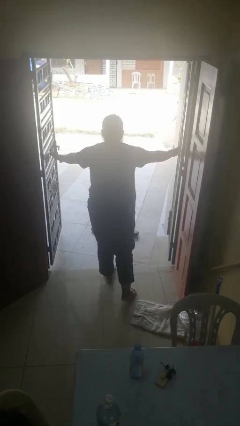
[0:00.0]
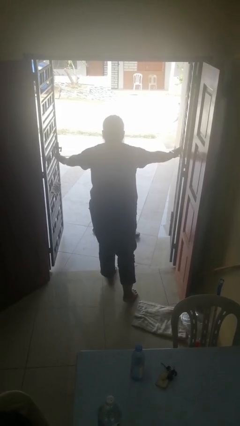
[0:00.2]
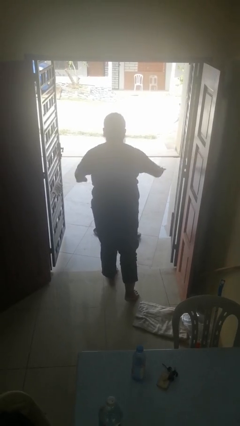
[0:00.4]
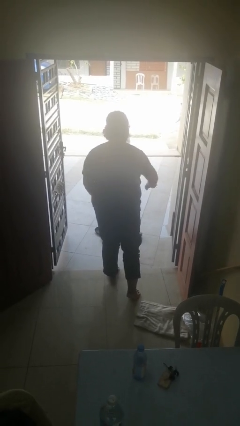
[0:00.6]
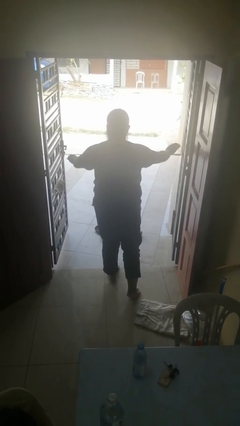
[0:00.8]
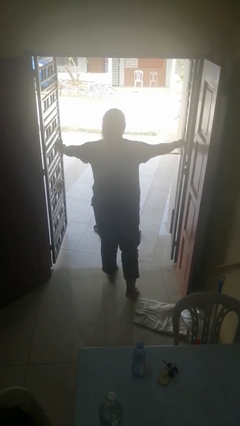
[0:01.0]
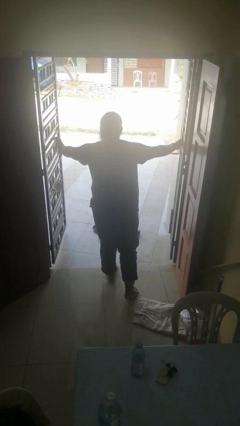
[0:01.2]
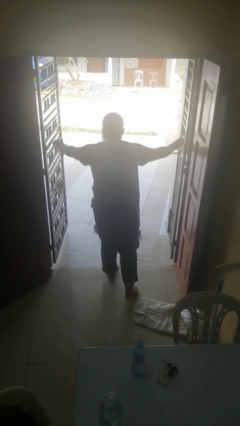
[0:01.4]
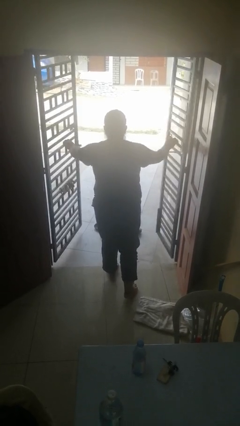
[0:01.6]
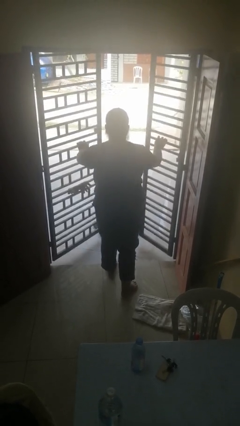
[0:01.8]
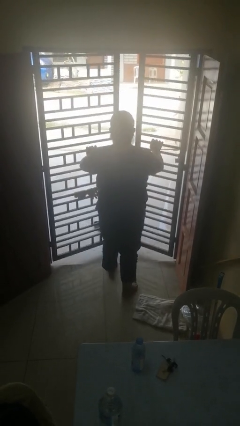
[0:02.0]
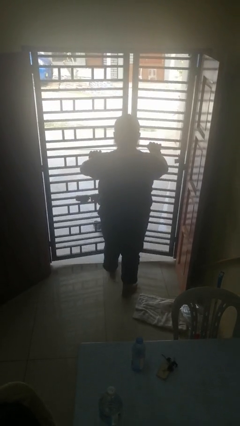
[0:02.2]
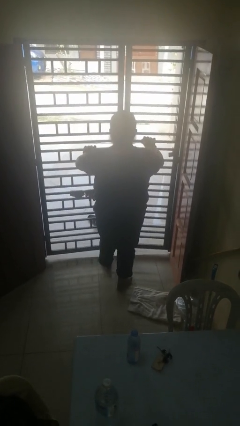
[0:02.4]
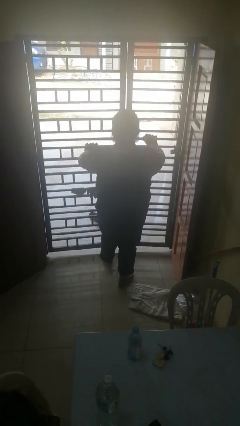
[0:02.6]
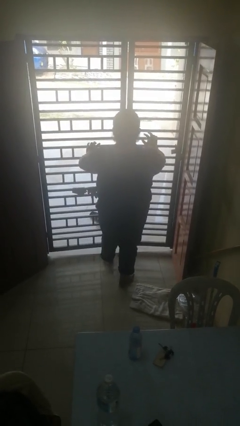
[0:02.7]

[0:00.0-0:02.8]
person closes gate

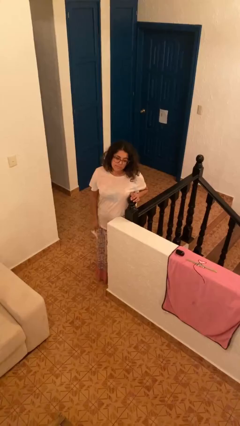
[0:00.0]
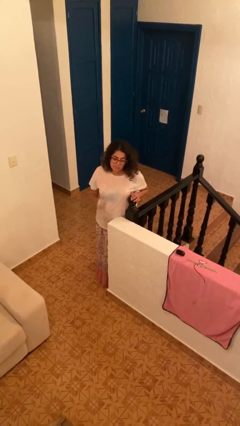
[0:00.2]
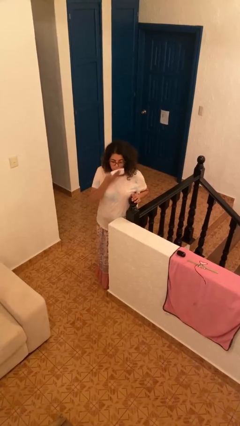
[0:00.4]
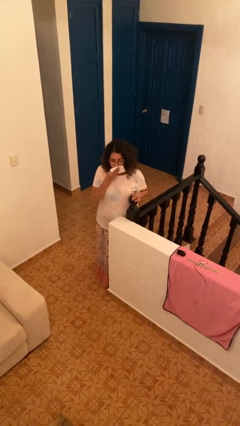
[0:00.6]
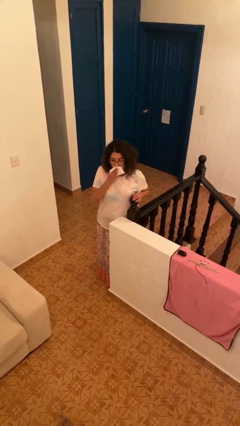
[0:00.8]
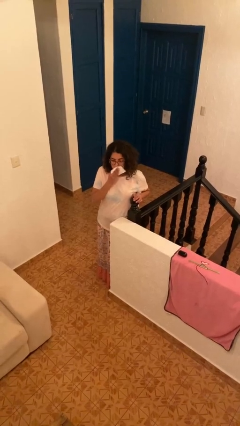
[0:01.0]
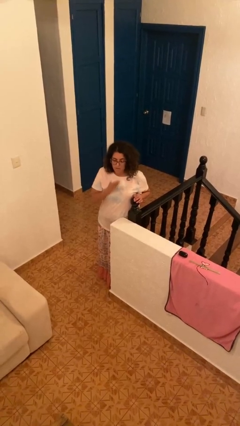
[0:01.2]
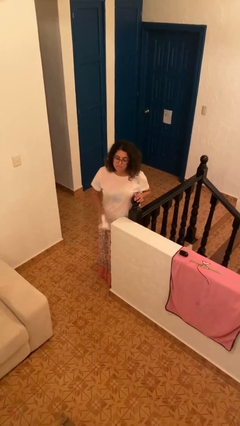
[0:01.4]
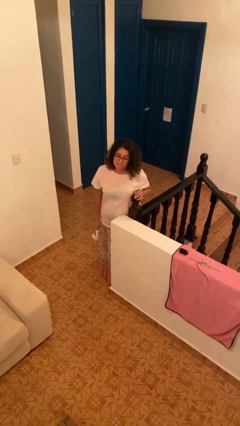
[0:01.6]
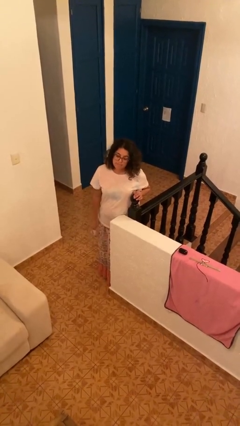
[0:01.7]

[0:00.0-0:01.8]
person wipes mouth with napkin

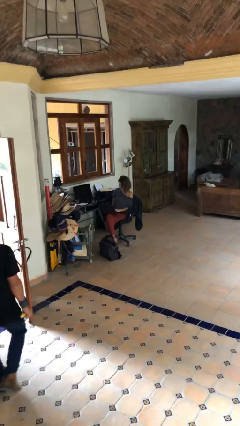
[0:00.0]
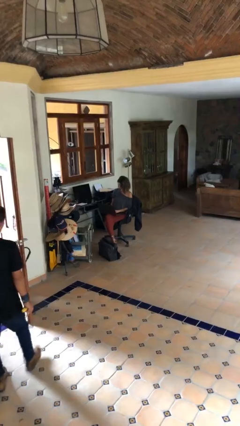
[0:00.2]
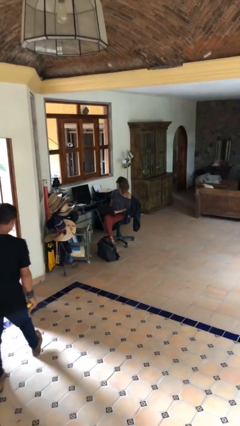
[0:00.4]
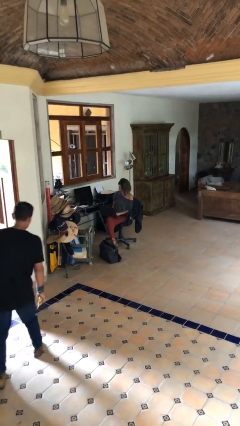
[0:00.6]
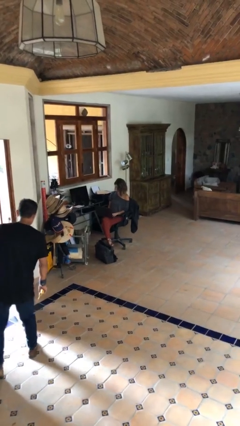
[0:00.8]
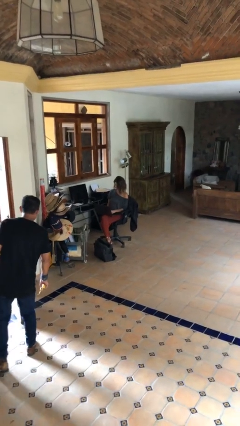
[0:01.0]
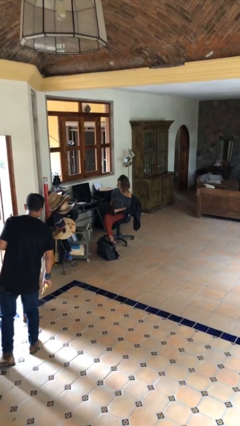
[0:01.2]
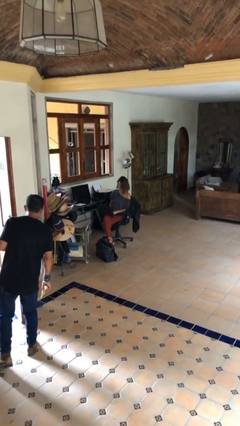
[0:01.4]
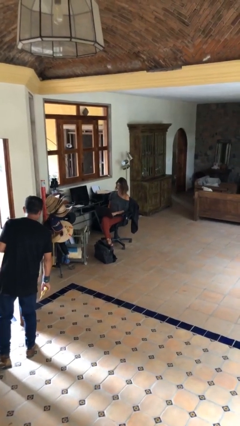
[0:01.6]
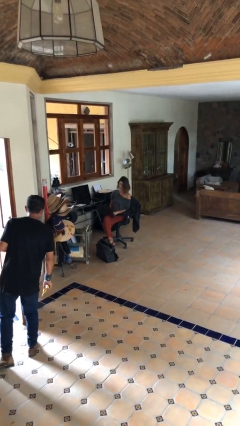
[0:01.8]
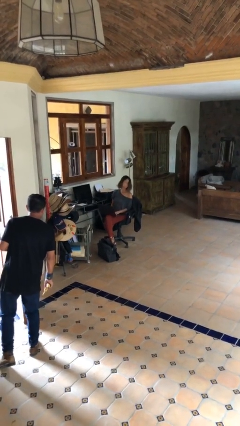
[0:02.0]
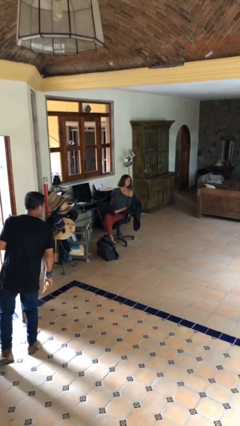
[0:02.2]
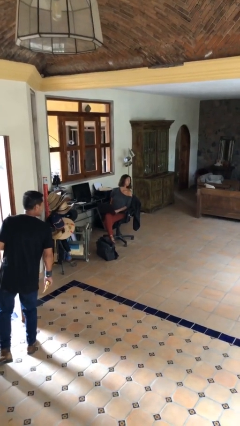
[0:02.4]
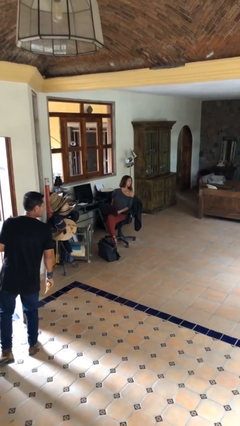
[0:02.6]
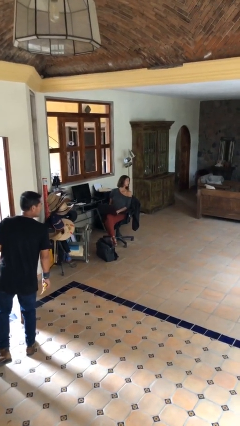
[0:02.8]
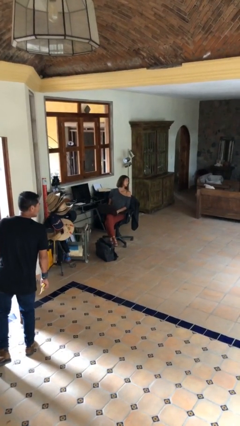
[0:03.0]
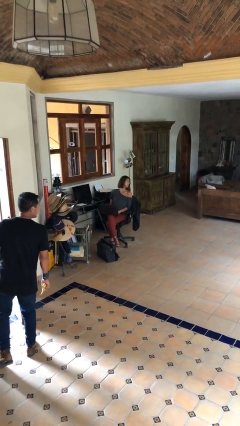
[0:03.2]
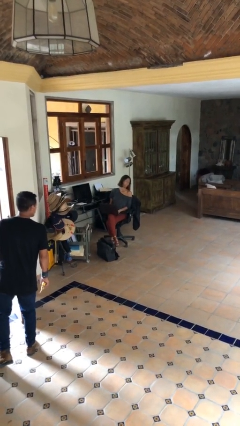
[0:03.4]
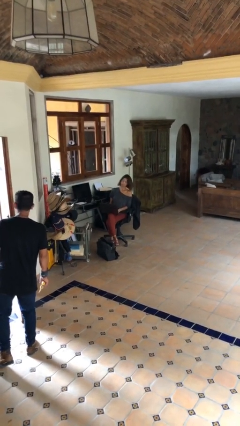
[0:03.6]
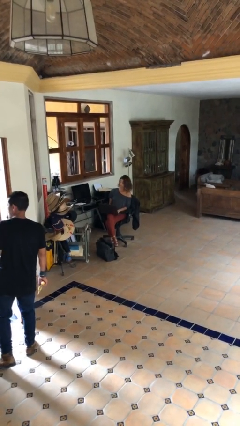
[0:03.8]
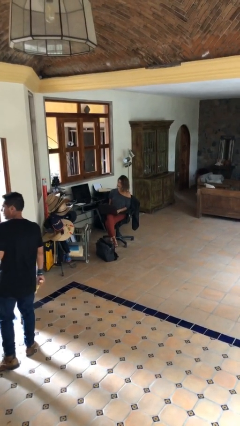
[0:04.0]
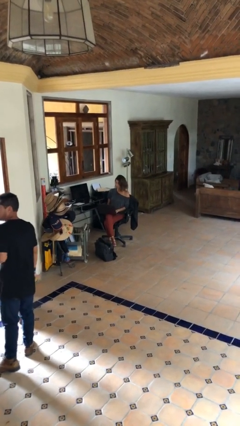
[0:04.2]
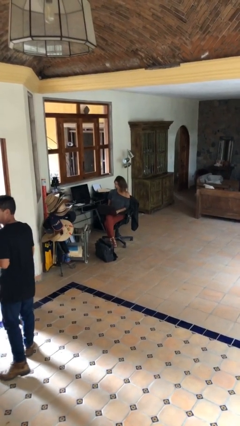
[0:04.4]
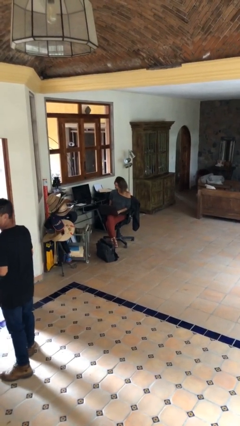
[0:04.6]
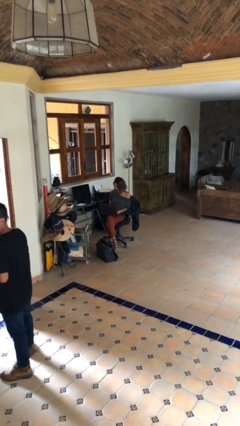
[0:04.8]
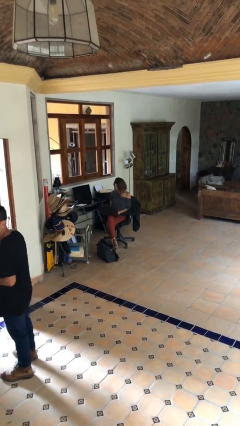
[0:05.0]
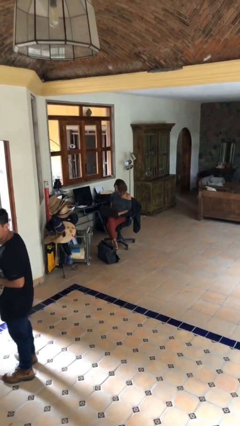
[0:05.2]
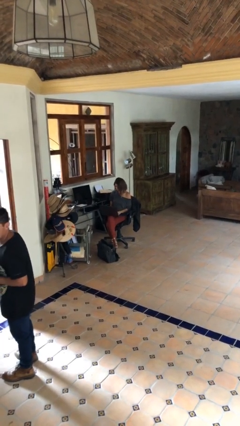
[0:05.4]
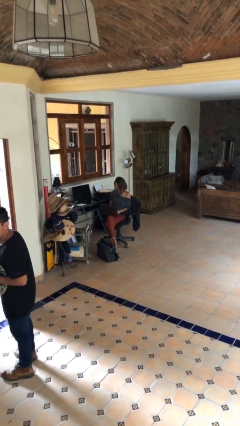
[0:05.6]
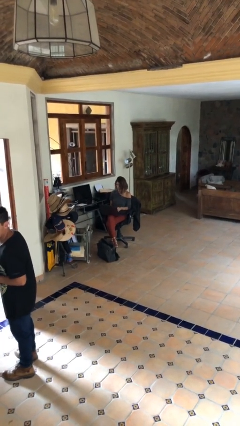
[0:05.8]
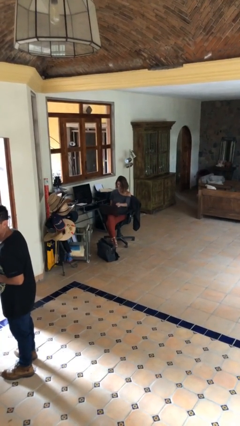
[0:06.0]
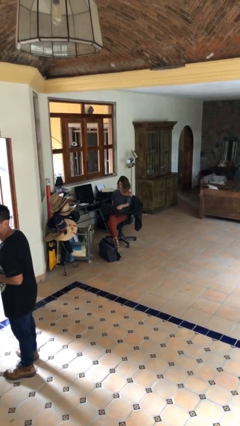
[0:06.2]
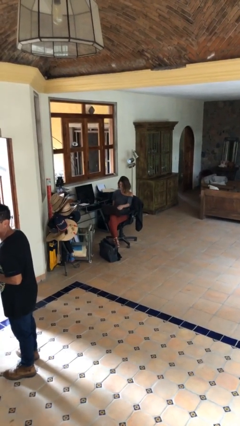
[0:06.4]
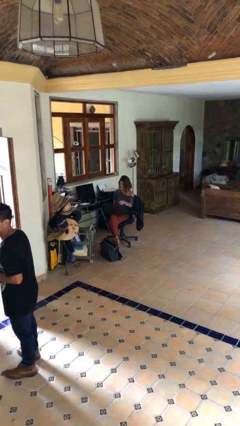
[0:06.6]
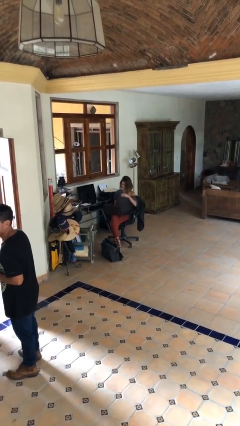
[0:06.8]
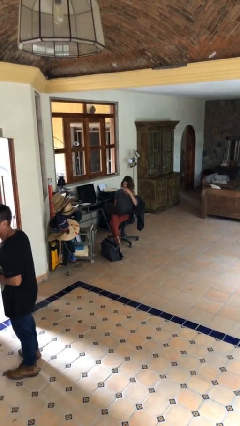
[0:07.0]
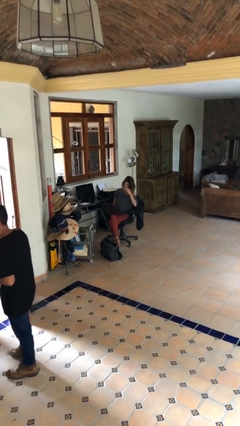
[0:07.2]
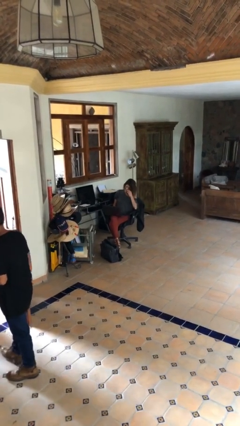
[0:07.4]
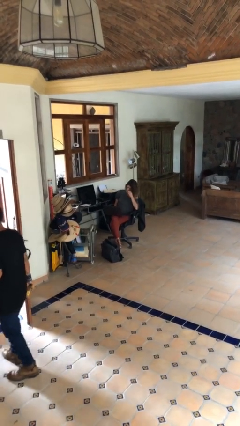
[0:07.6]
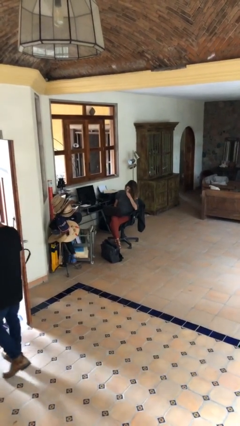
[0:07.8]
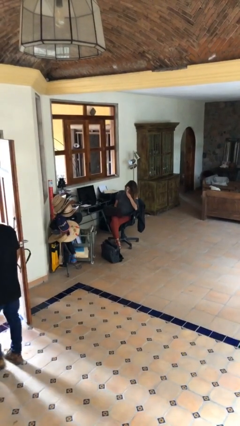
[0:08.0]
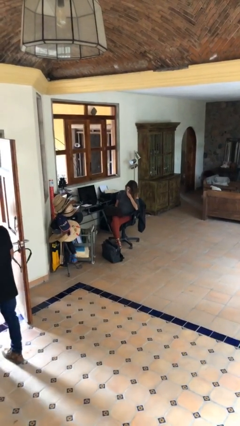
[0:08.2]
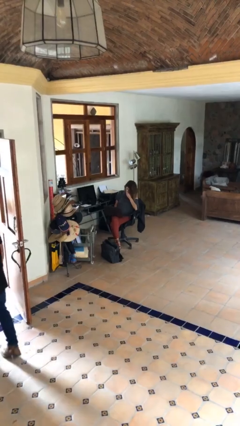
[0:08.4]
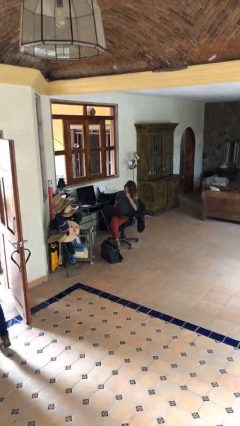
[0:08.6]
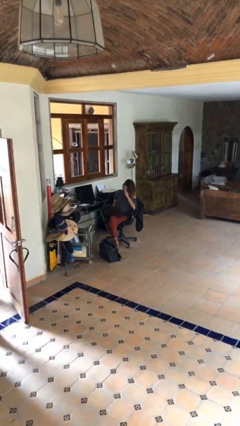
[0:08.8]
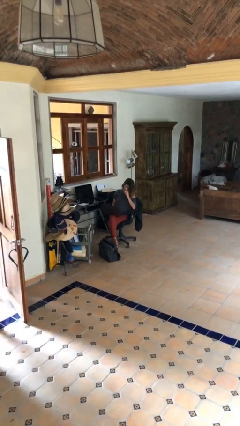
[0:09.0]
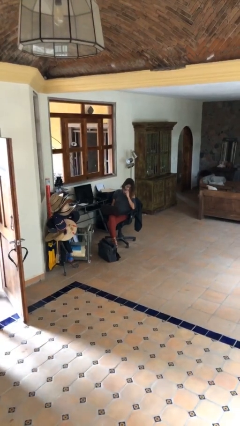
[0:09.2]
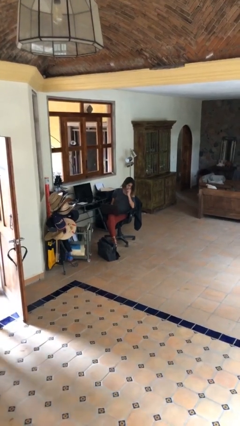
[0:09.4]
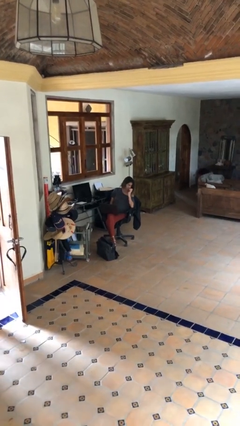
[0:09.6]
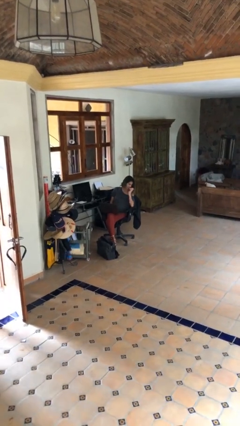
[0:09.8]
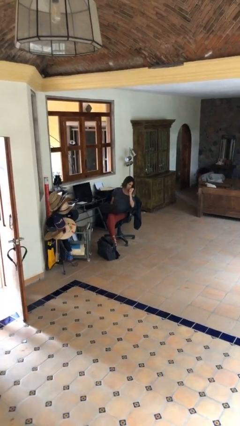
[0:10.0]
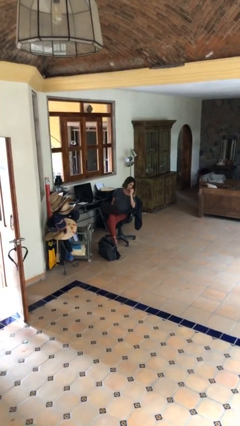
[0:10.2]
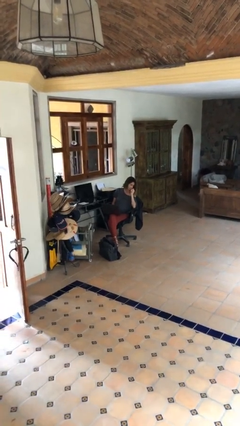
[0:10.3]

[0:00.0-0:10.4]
person interacts with laptop

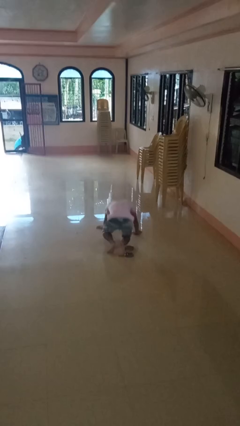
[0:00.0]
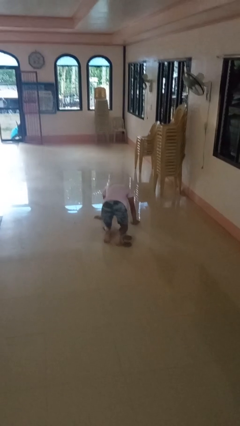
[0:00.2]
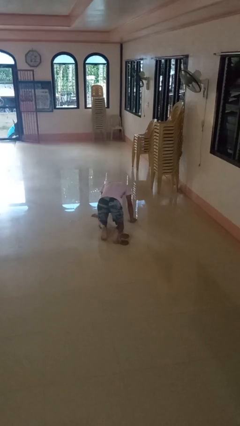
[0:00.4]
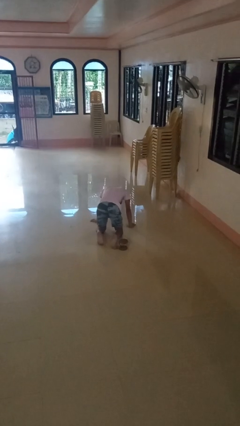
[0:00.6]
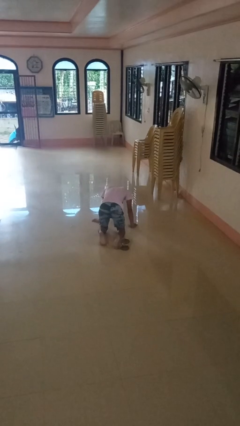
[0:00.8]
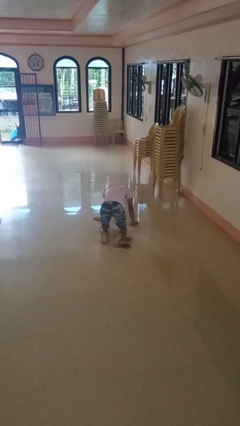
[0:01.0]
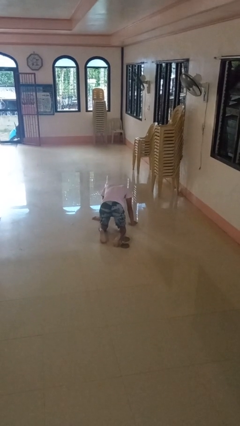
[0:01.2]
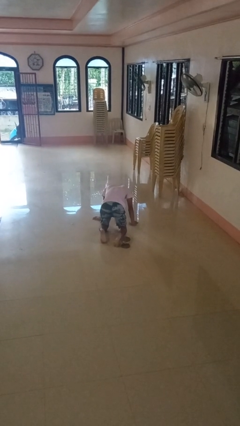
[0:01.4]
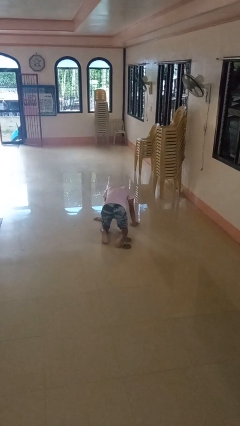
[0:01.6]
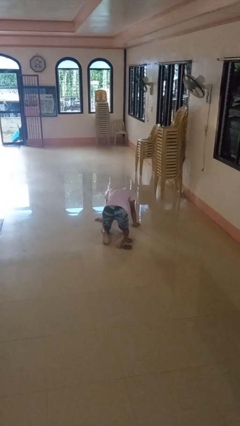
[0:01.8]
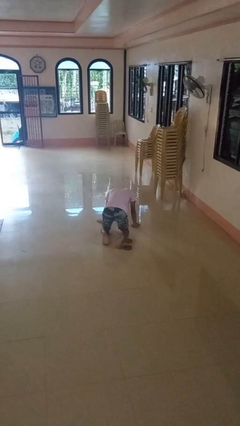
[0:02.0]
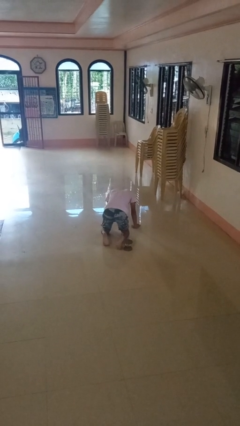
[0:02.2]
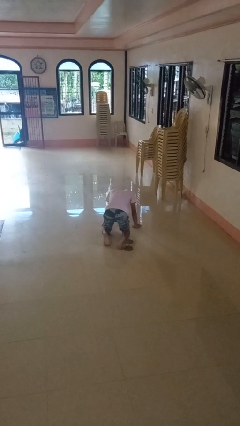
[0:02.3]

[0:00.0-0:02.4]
person trips on object on floor
